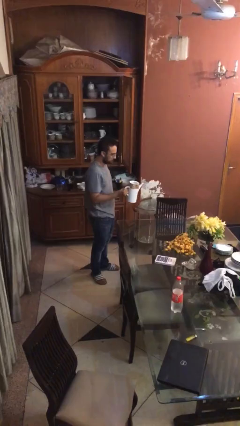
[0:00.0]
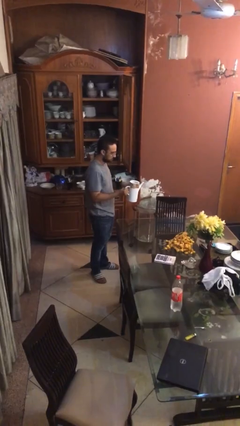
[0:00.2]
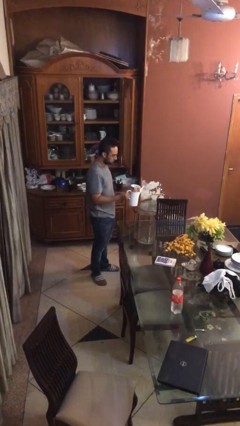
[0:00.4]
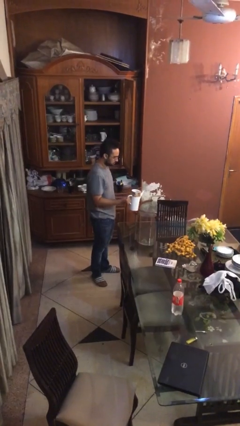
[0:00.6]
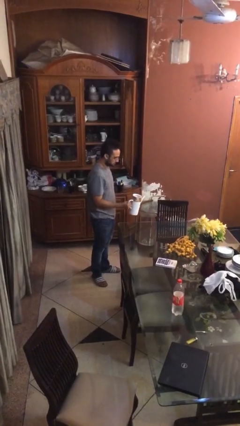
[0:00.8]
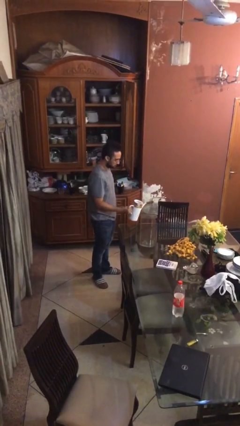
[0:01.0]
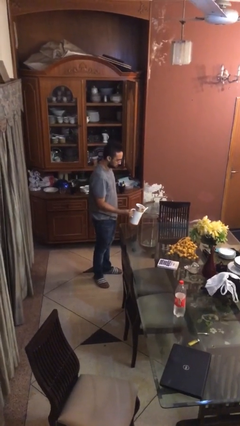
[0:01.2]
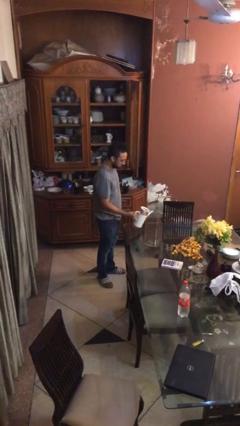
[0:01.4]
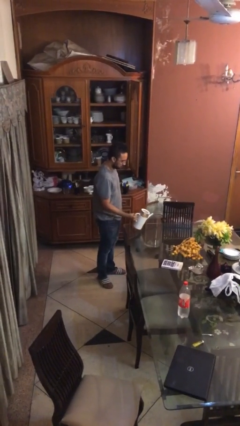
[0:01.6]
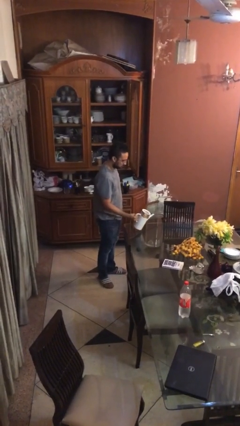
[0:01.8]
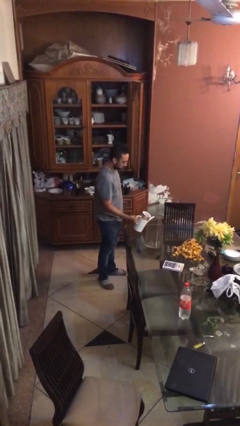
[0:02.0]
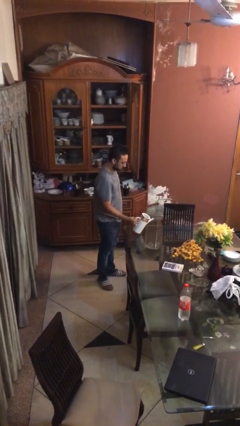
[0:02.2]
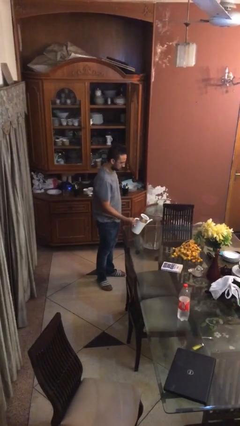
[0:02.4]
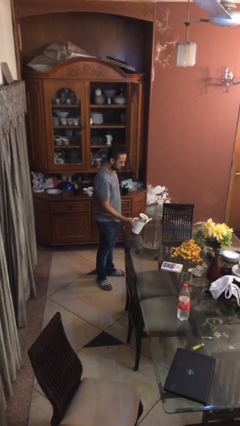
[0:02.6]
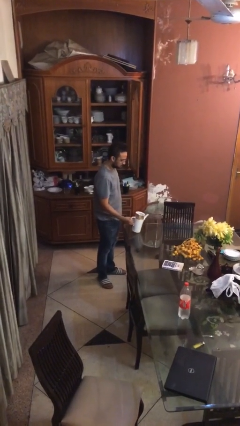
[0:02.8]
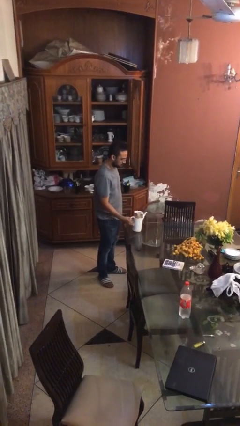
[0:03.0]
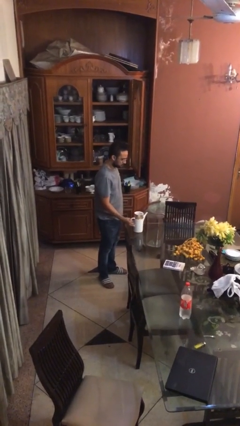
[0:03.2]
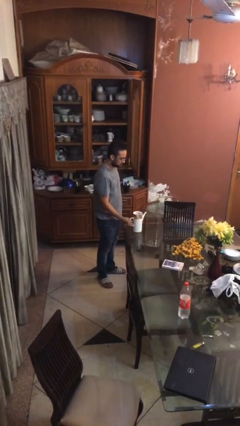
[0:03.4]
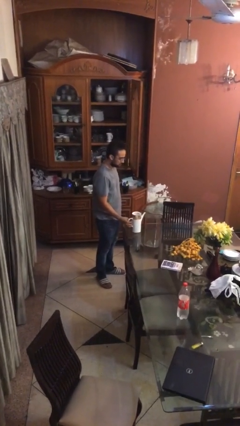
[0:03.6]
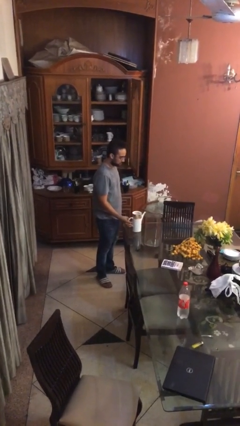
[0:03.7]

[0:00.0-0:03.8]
person puts down object on table

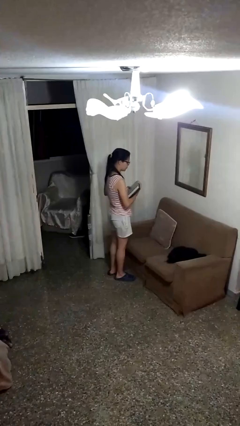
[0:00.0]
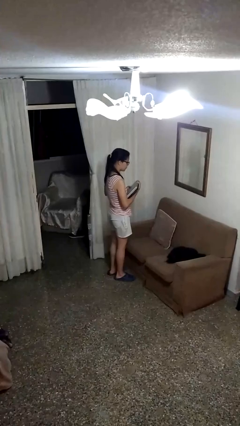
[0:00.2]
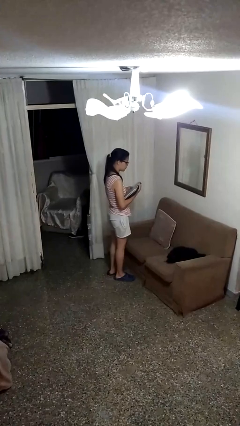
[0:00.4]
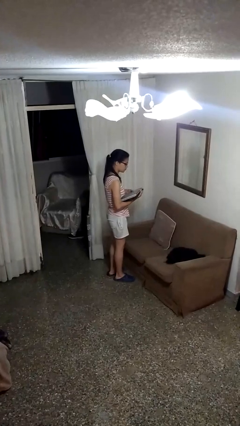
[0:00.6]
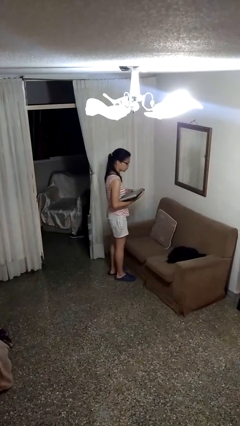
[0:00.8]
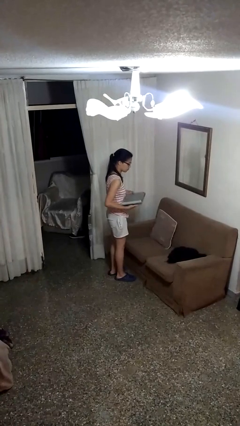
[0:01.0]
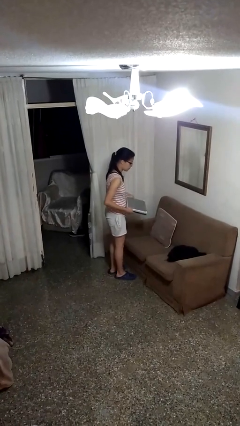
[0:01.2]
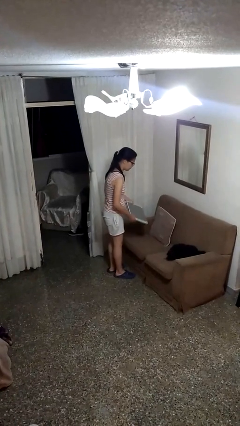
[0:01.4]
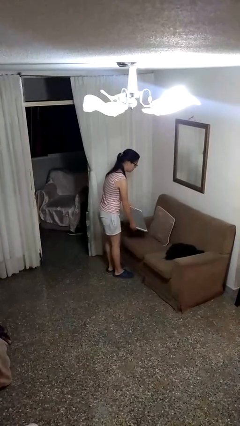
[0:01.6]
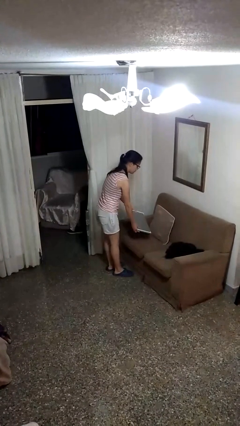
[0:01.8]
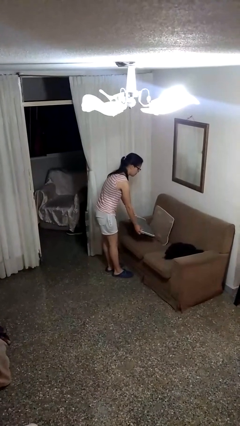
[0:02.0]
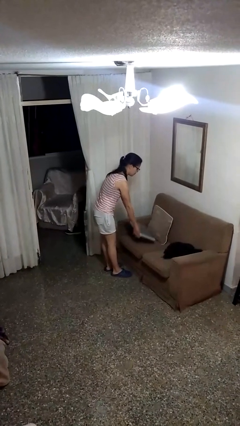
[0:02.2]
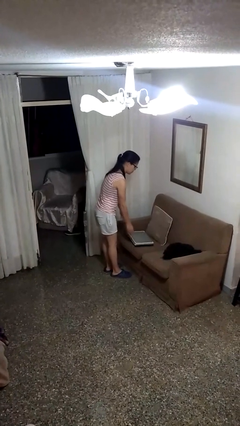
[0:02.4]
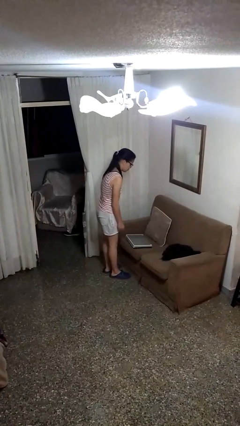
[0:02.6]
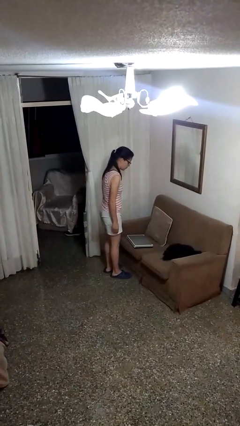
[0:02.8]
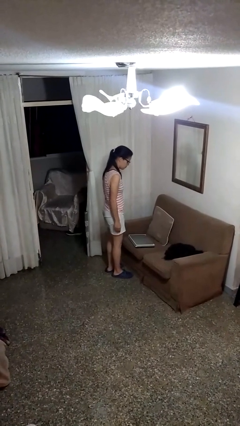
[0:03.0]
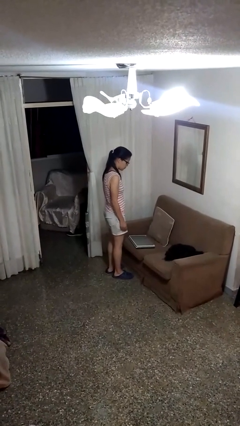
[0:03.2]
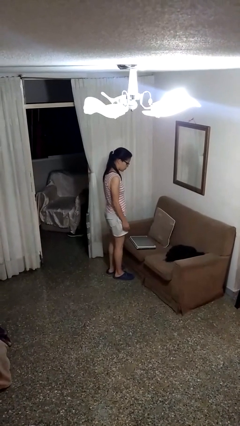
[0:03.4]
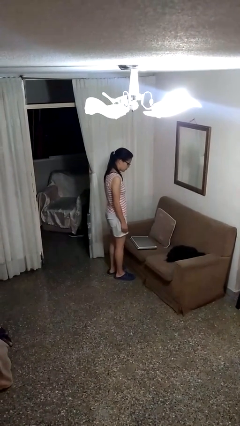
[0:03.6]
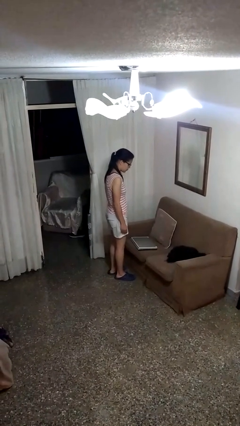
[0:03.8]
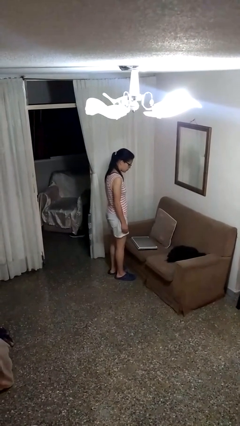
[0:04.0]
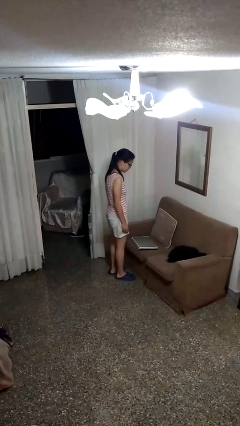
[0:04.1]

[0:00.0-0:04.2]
person puts down object on couch

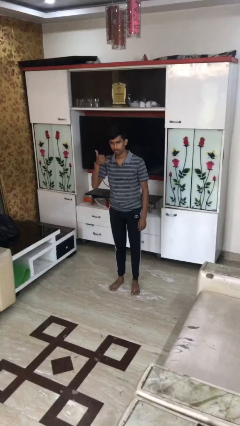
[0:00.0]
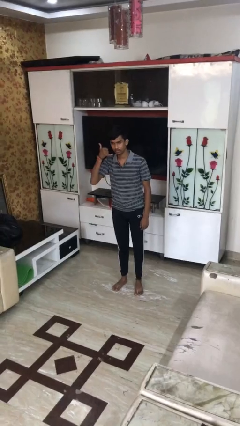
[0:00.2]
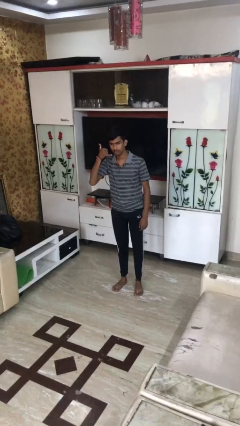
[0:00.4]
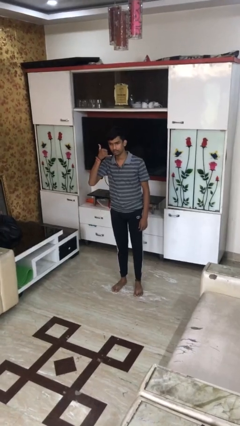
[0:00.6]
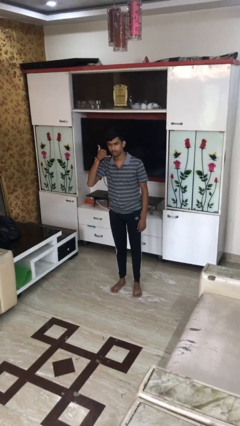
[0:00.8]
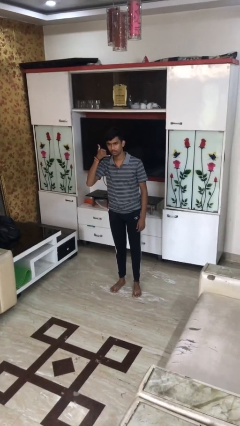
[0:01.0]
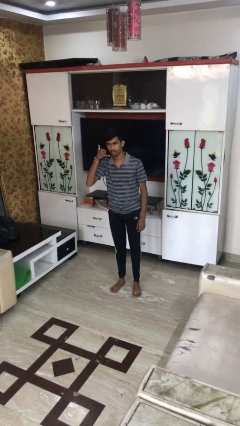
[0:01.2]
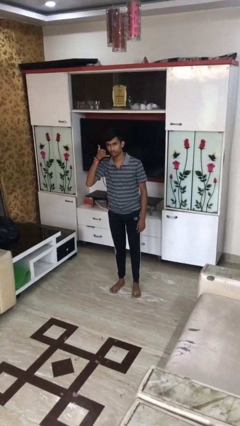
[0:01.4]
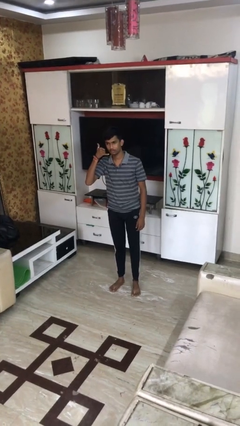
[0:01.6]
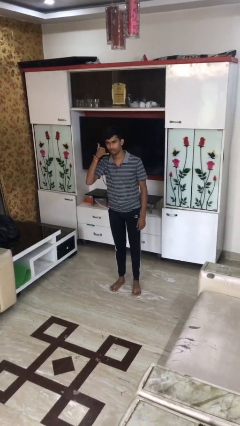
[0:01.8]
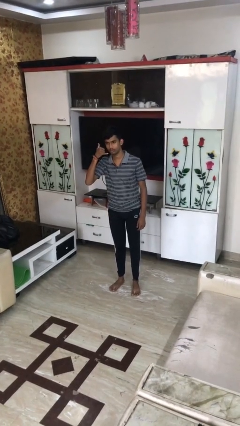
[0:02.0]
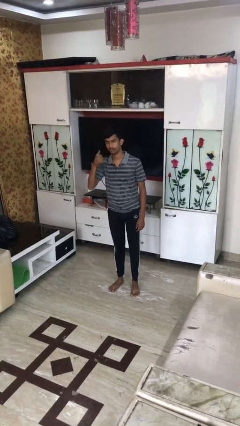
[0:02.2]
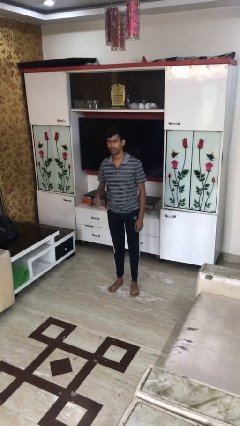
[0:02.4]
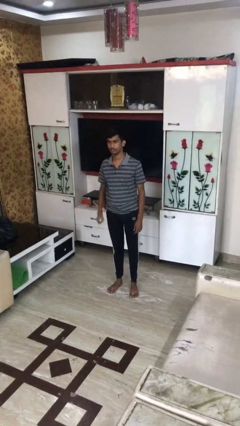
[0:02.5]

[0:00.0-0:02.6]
person gestures call me

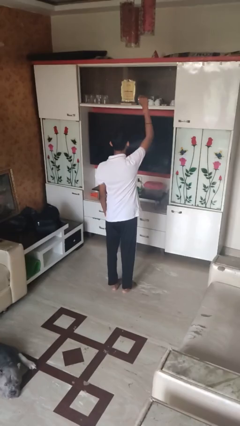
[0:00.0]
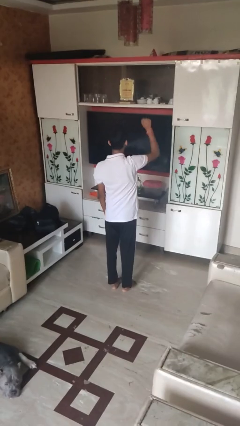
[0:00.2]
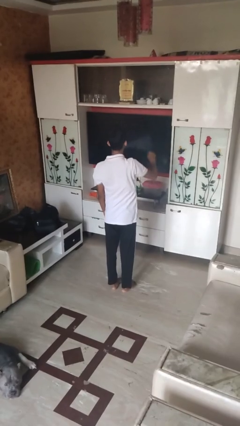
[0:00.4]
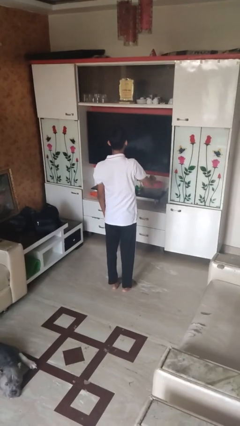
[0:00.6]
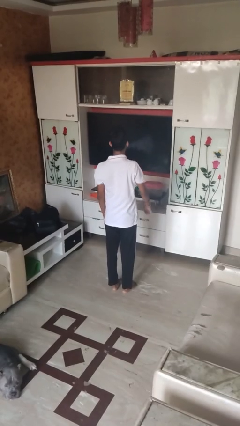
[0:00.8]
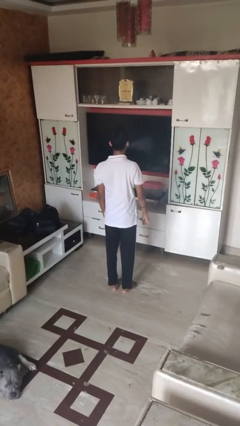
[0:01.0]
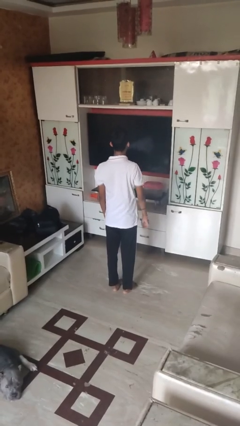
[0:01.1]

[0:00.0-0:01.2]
person gestures lower hand

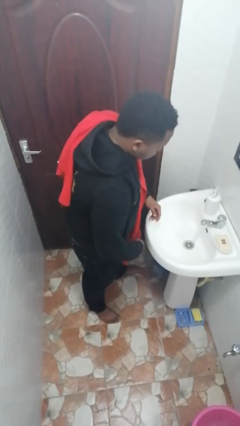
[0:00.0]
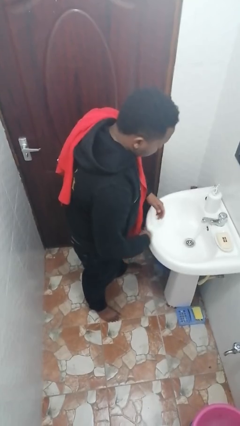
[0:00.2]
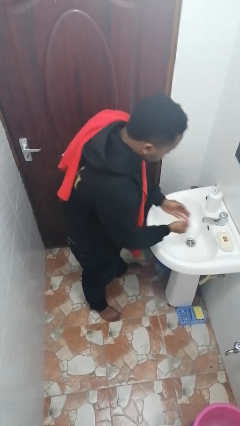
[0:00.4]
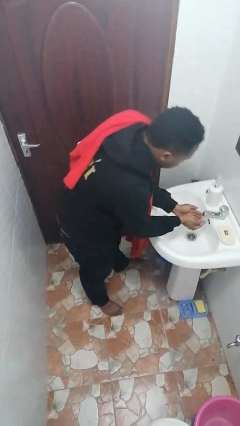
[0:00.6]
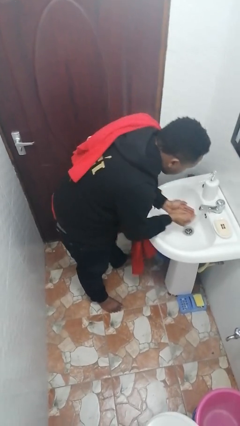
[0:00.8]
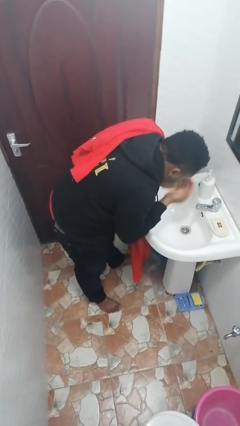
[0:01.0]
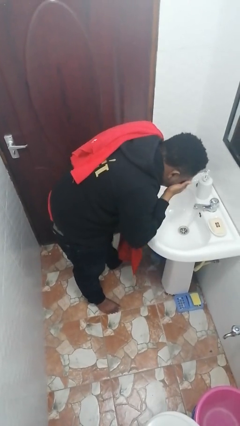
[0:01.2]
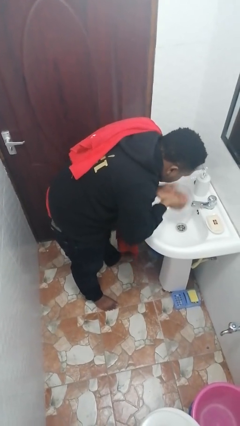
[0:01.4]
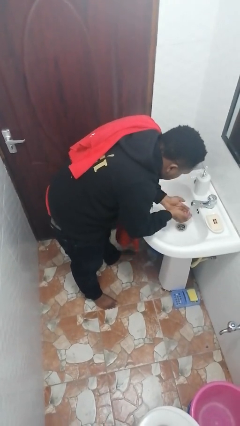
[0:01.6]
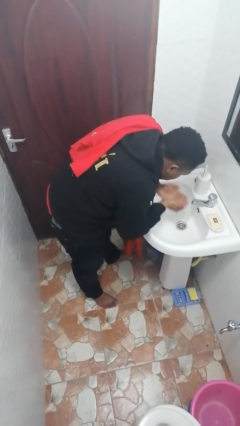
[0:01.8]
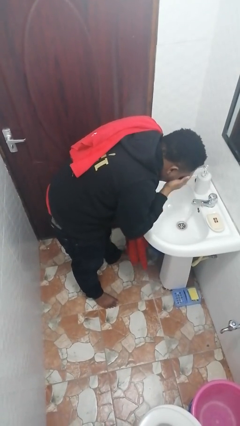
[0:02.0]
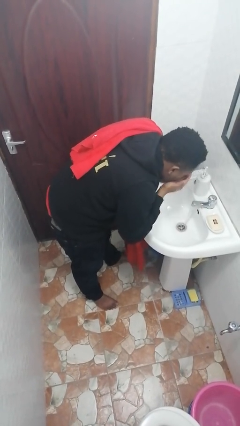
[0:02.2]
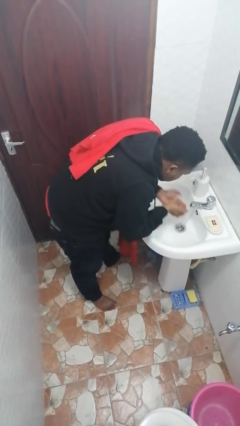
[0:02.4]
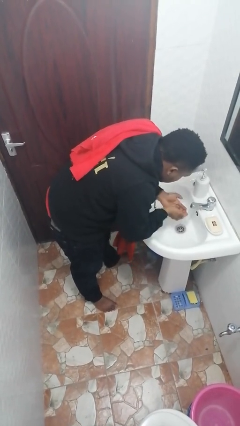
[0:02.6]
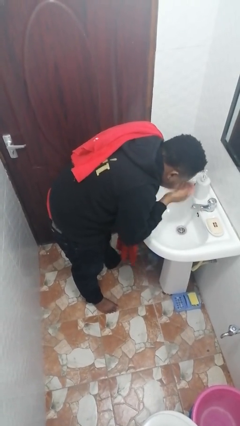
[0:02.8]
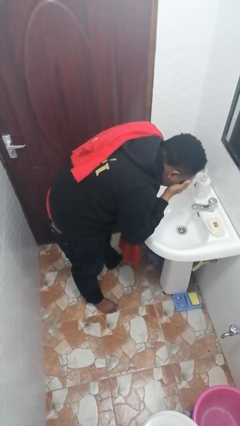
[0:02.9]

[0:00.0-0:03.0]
person washes face

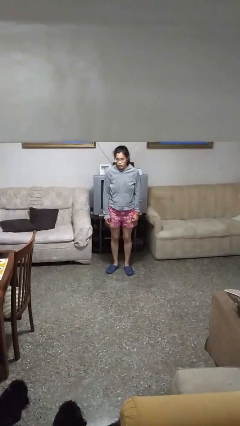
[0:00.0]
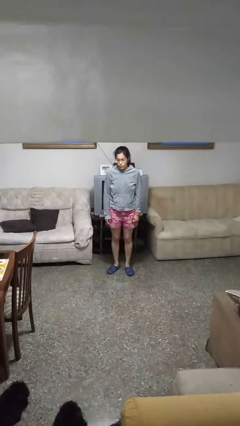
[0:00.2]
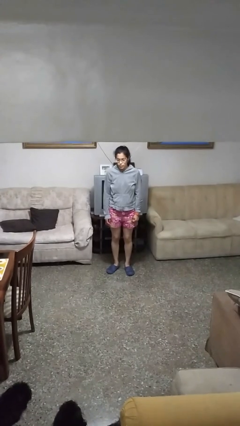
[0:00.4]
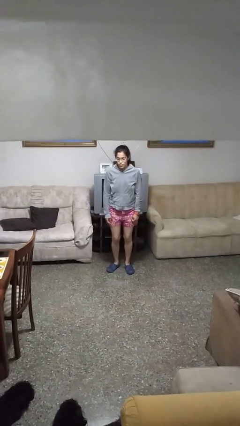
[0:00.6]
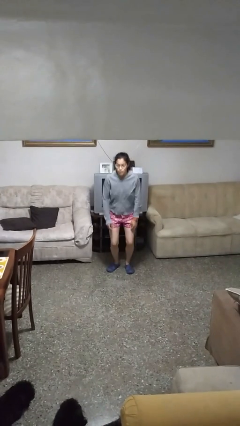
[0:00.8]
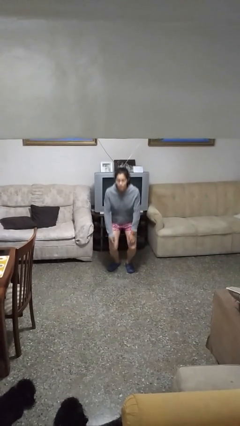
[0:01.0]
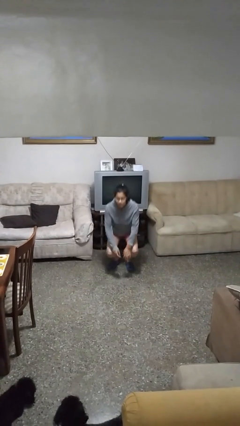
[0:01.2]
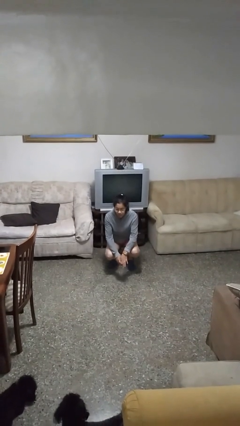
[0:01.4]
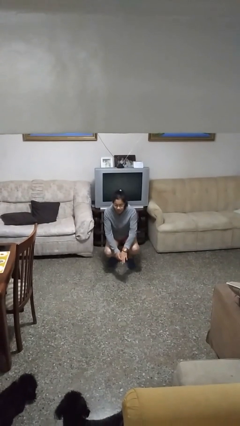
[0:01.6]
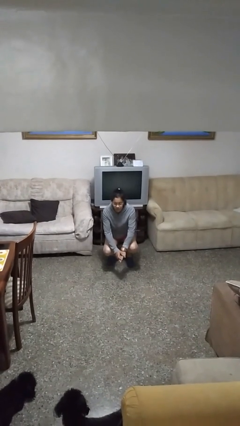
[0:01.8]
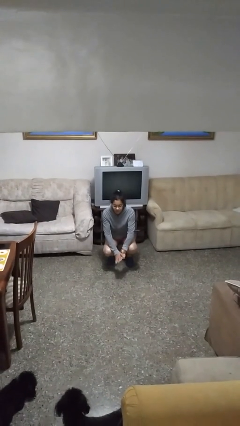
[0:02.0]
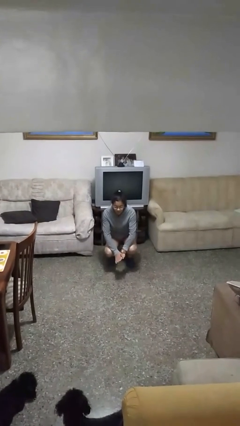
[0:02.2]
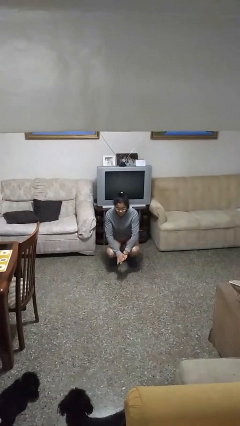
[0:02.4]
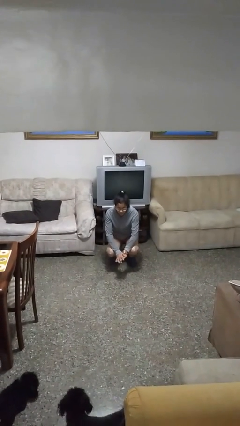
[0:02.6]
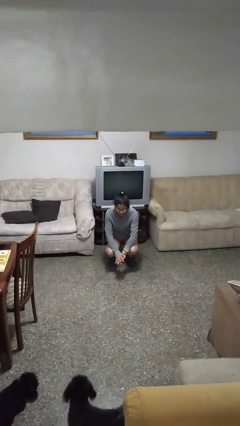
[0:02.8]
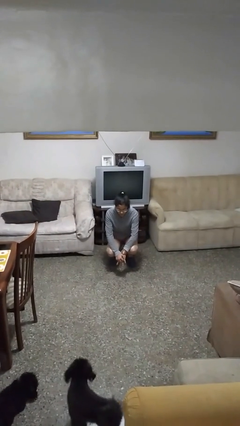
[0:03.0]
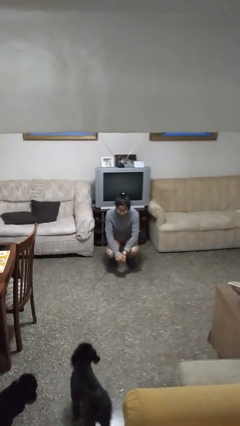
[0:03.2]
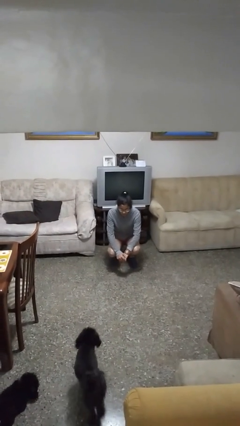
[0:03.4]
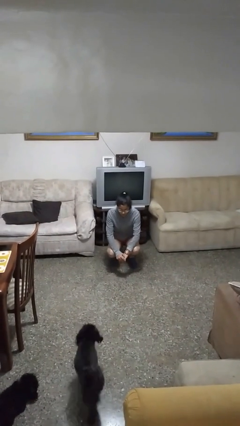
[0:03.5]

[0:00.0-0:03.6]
person squats
